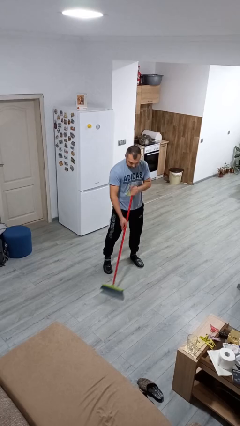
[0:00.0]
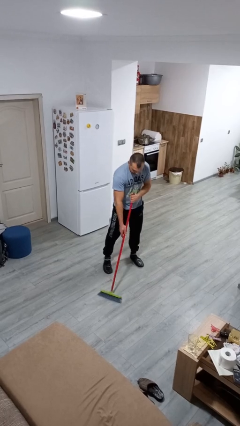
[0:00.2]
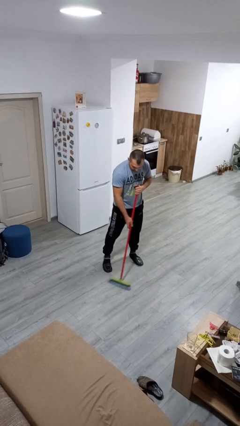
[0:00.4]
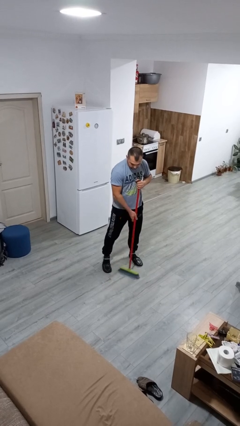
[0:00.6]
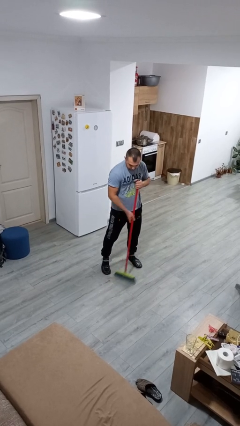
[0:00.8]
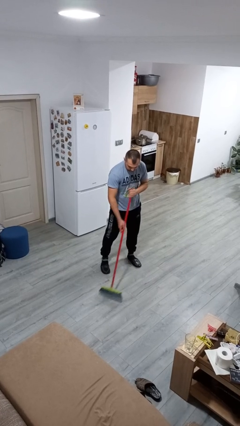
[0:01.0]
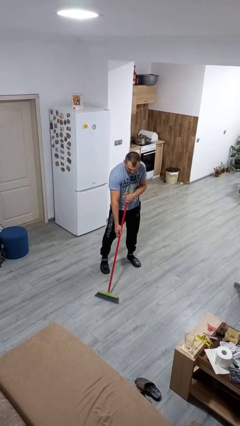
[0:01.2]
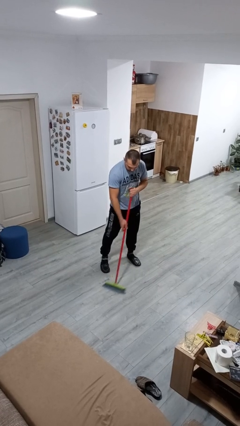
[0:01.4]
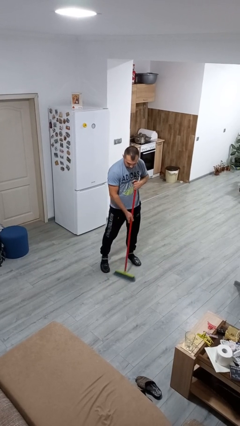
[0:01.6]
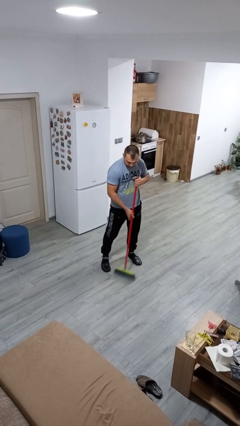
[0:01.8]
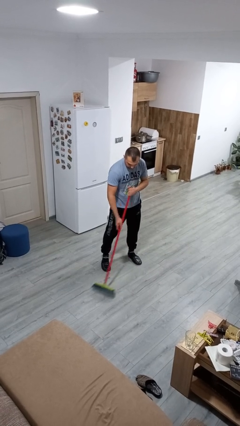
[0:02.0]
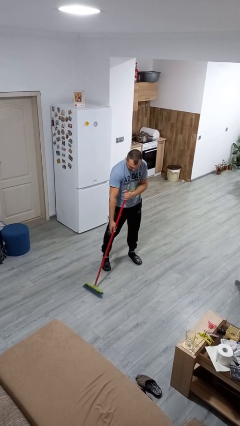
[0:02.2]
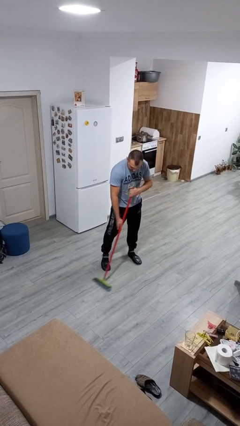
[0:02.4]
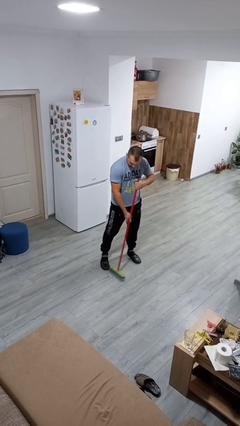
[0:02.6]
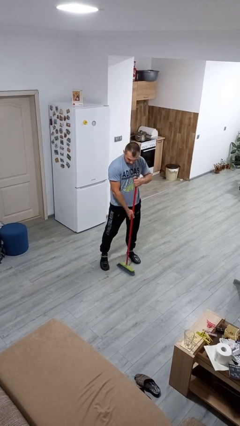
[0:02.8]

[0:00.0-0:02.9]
person sweeps floor

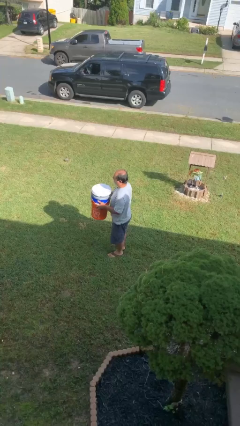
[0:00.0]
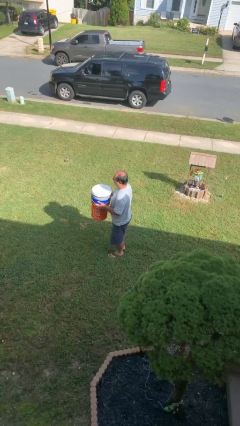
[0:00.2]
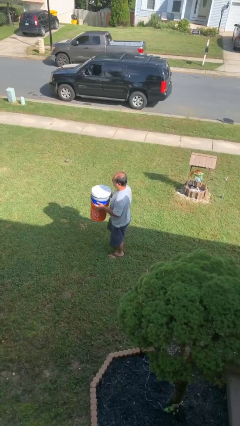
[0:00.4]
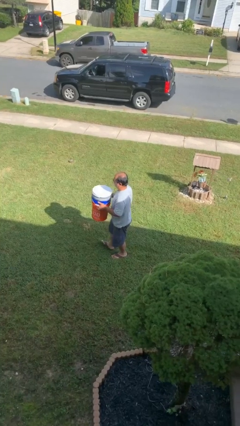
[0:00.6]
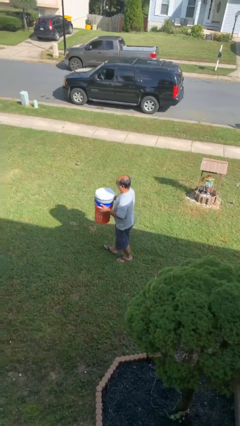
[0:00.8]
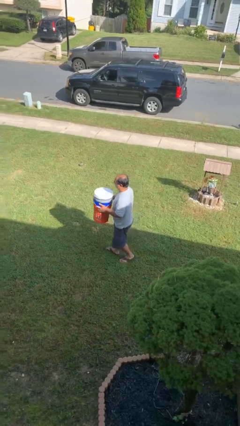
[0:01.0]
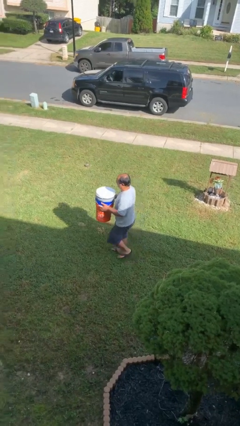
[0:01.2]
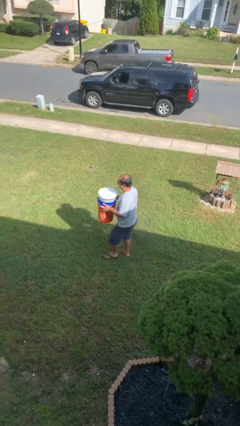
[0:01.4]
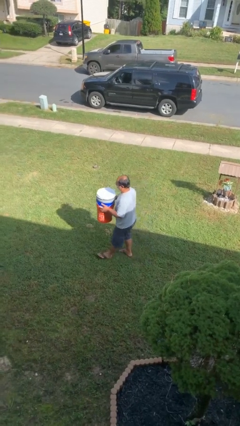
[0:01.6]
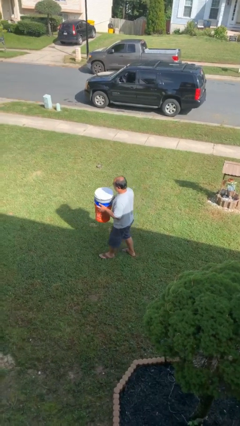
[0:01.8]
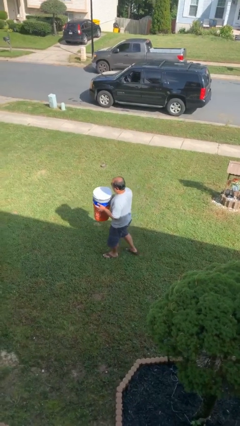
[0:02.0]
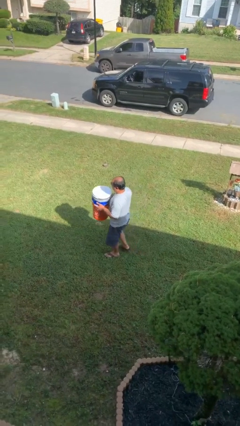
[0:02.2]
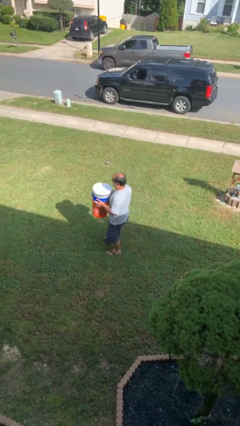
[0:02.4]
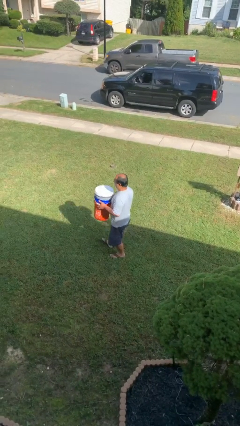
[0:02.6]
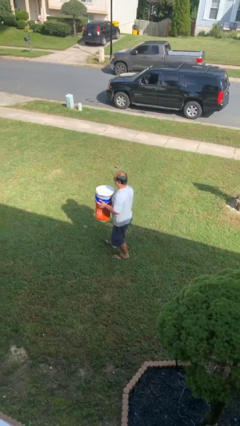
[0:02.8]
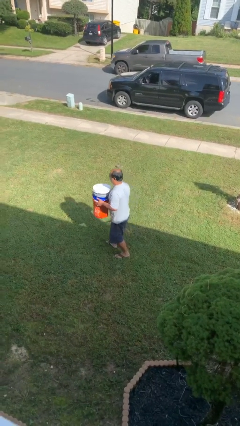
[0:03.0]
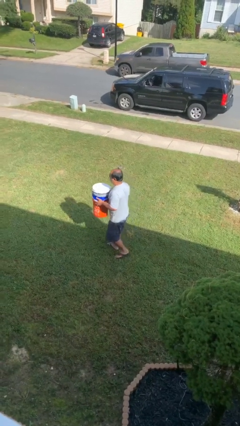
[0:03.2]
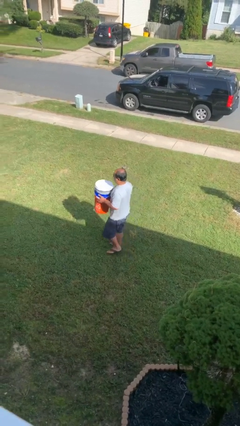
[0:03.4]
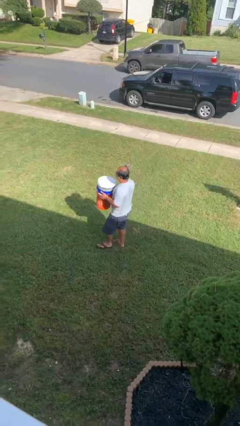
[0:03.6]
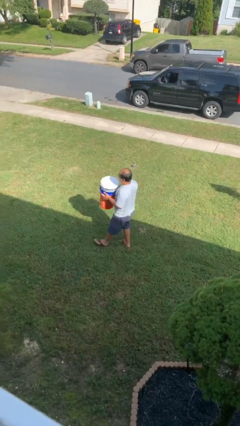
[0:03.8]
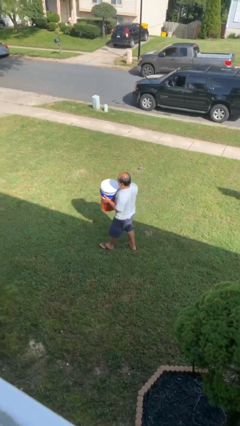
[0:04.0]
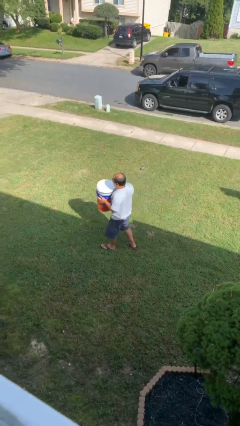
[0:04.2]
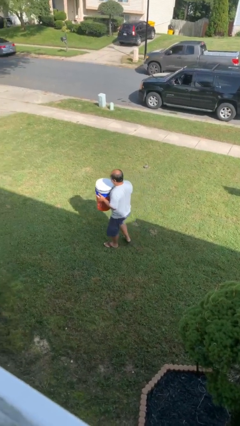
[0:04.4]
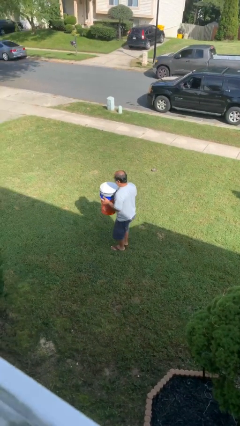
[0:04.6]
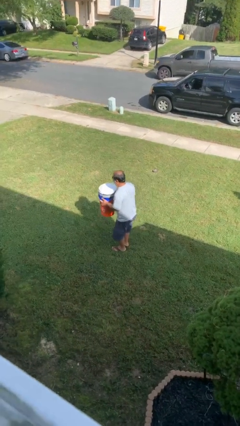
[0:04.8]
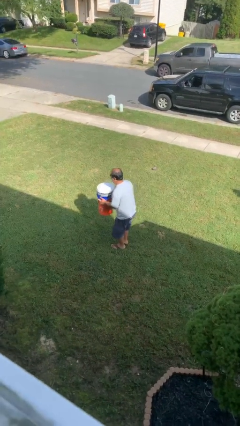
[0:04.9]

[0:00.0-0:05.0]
person carries heavy object

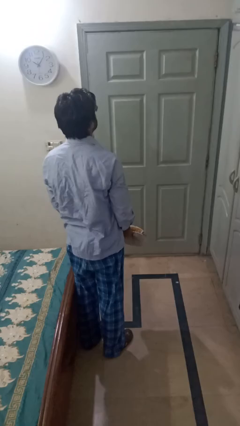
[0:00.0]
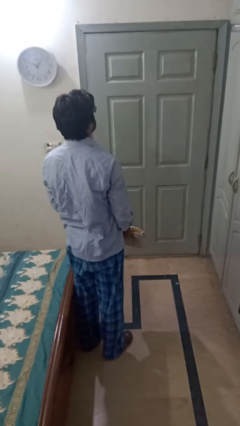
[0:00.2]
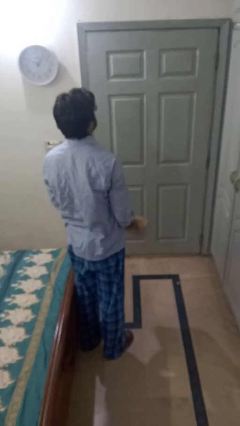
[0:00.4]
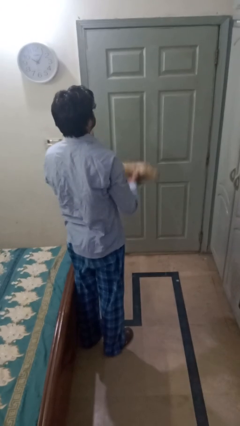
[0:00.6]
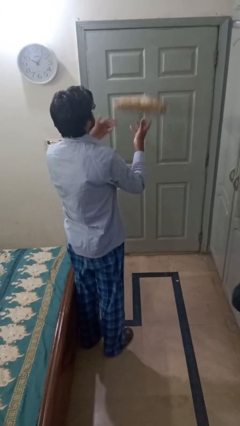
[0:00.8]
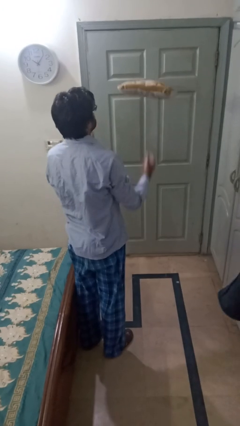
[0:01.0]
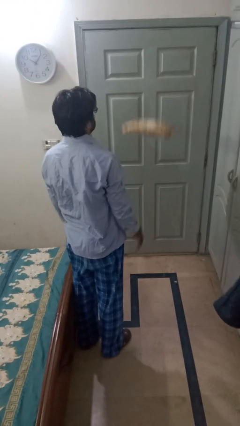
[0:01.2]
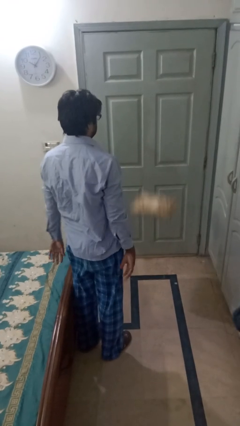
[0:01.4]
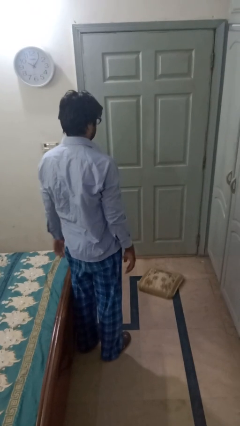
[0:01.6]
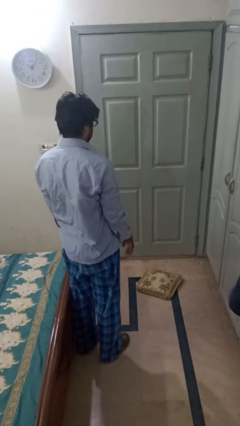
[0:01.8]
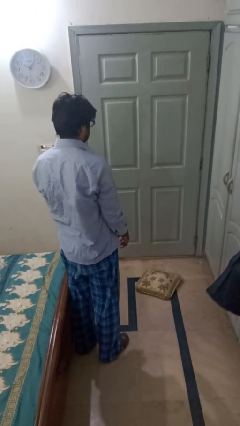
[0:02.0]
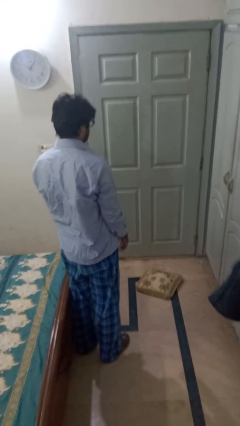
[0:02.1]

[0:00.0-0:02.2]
person throws object into air

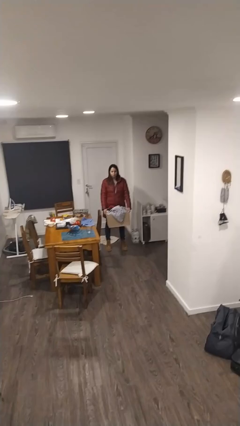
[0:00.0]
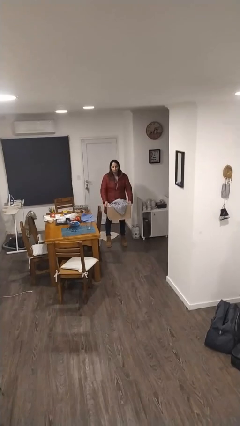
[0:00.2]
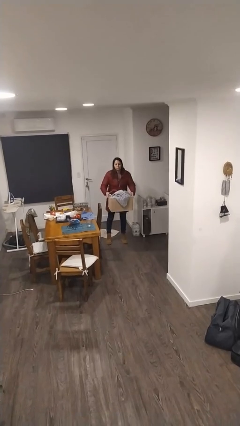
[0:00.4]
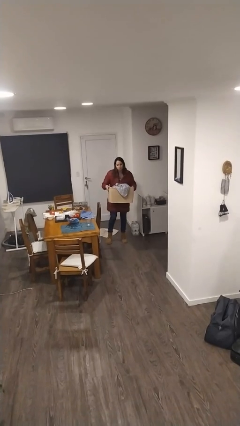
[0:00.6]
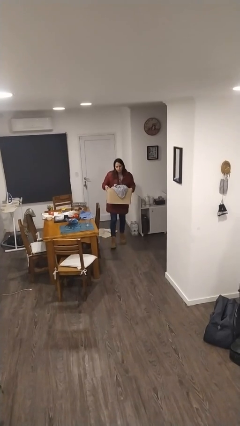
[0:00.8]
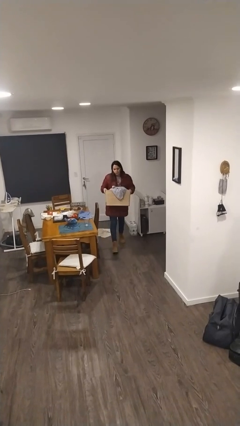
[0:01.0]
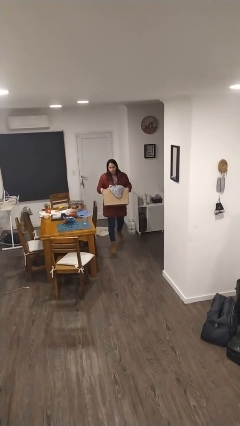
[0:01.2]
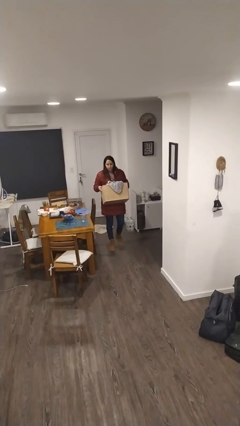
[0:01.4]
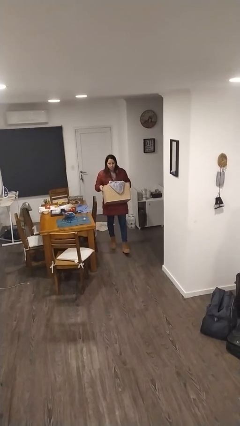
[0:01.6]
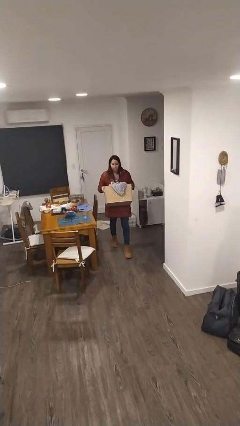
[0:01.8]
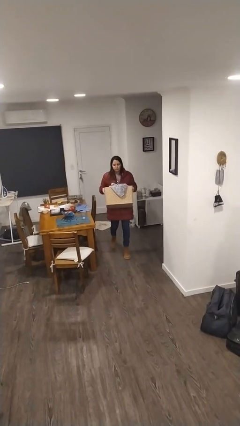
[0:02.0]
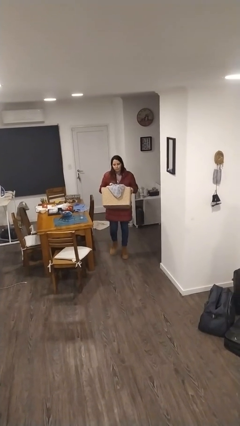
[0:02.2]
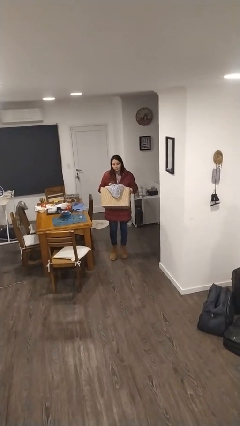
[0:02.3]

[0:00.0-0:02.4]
person carries laundry basket

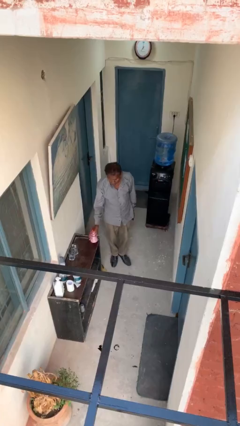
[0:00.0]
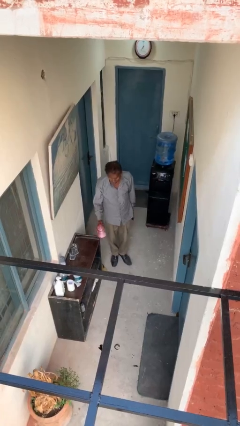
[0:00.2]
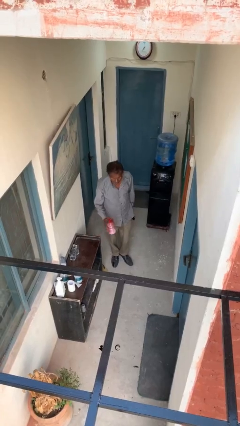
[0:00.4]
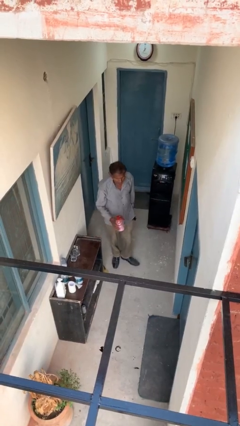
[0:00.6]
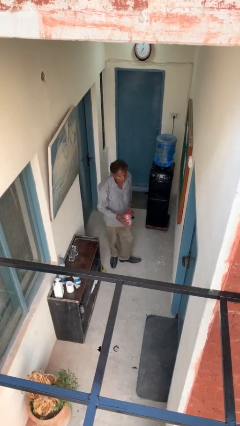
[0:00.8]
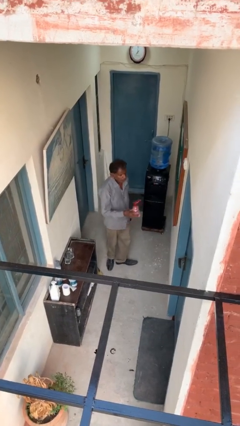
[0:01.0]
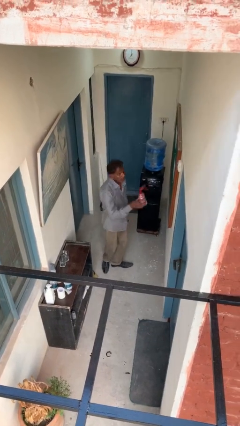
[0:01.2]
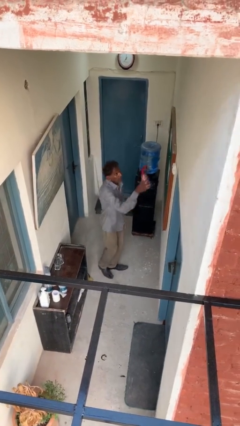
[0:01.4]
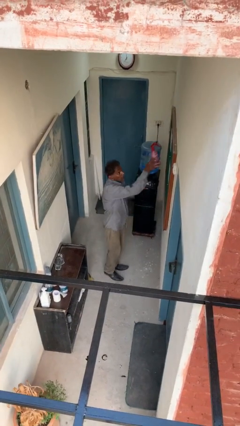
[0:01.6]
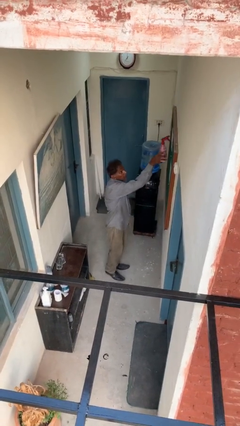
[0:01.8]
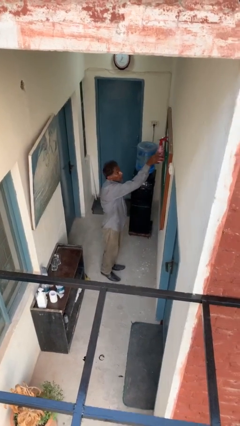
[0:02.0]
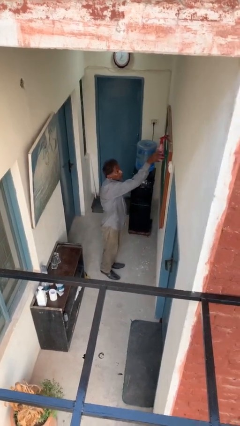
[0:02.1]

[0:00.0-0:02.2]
person picks up object from table

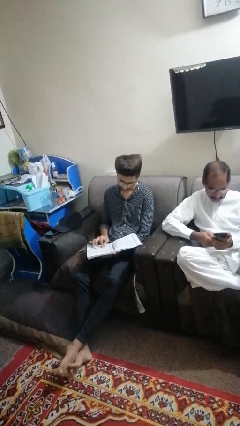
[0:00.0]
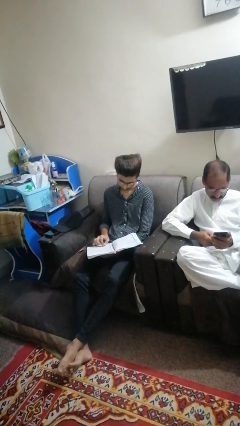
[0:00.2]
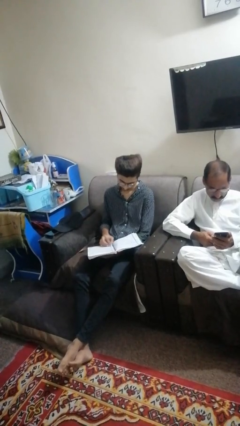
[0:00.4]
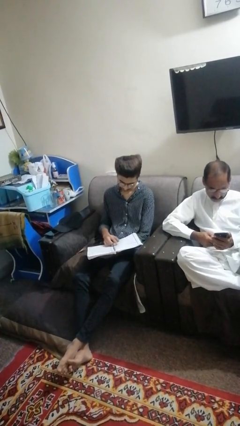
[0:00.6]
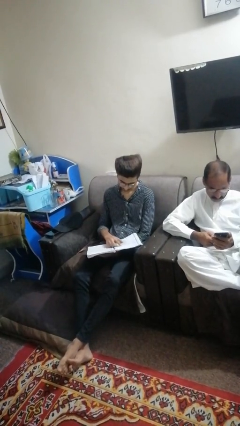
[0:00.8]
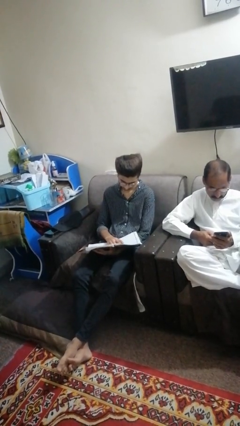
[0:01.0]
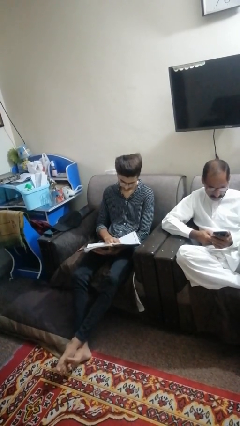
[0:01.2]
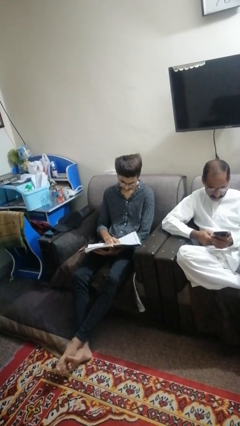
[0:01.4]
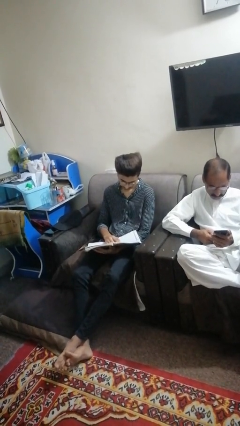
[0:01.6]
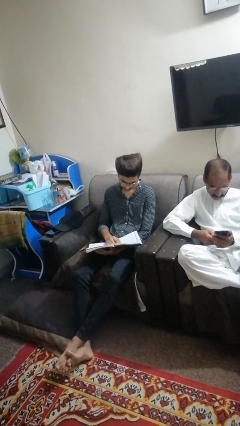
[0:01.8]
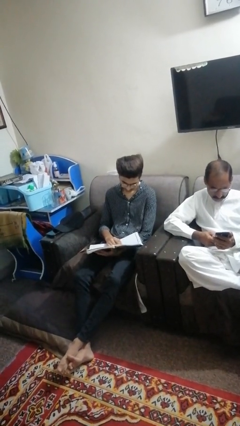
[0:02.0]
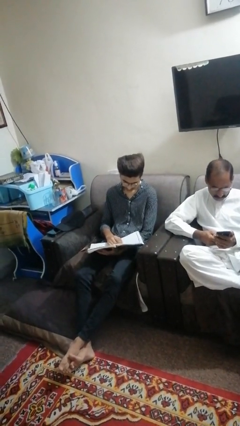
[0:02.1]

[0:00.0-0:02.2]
person reads magazine

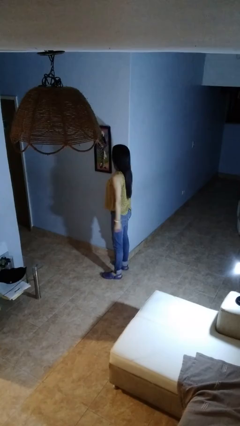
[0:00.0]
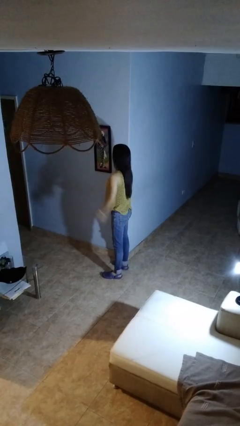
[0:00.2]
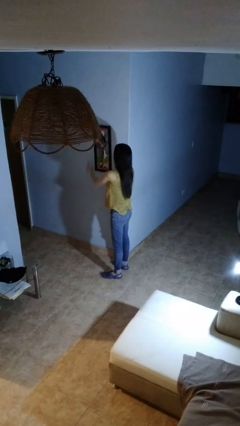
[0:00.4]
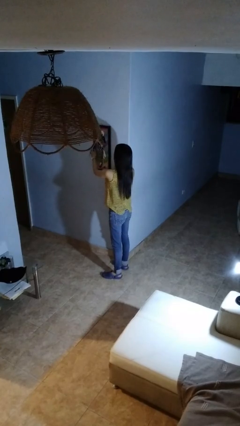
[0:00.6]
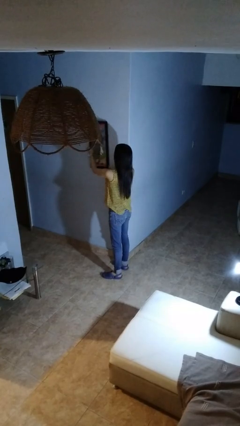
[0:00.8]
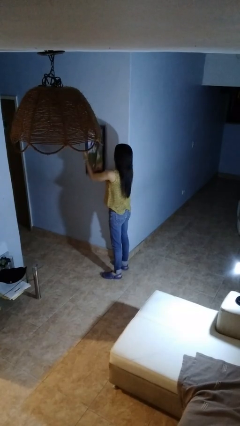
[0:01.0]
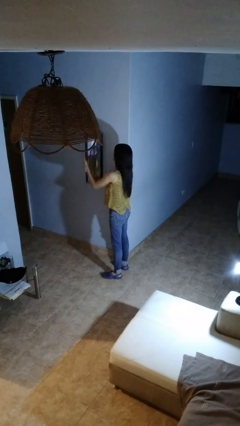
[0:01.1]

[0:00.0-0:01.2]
person takes down picture frame
